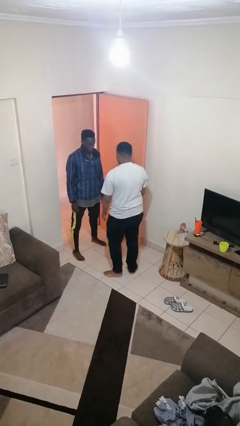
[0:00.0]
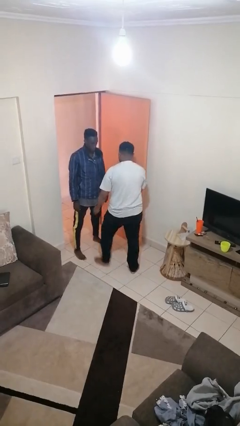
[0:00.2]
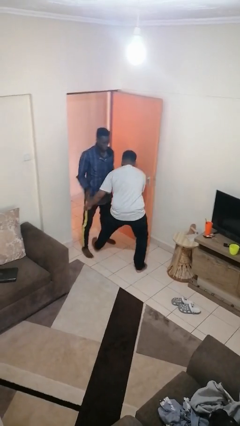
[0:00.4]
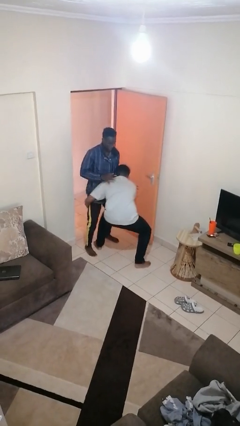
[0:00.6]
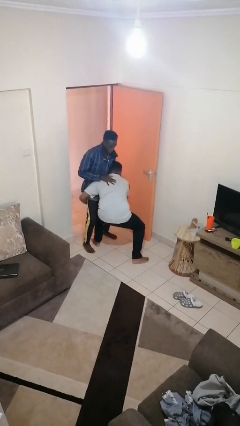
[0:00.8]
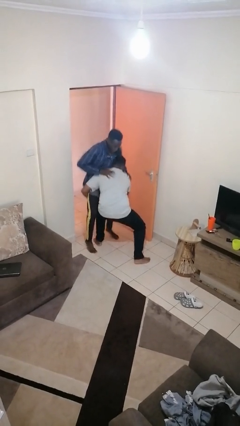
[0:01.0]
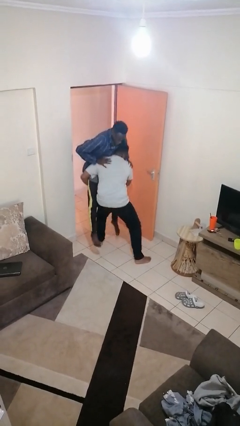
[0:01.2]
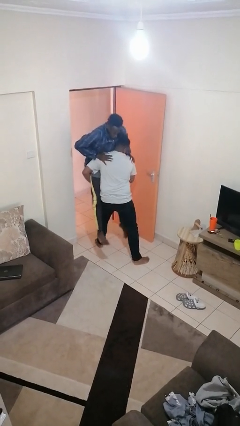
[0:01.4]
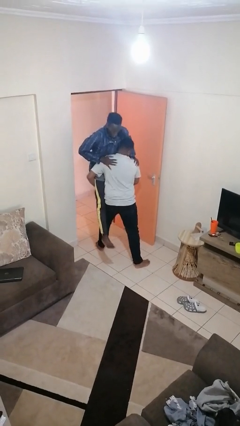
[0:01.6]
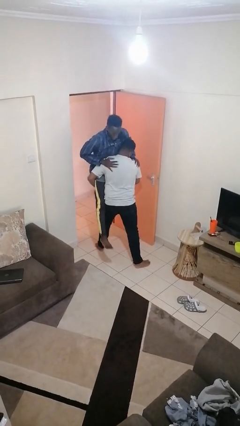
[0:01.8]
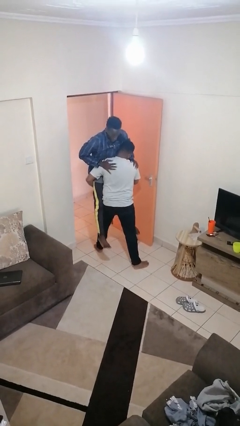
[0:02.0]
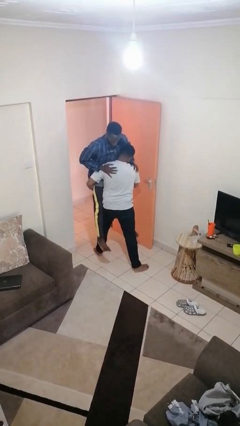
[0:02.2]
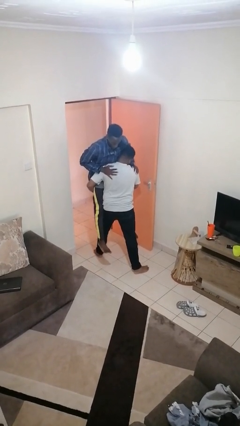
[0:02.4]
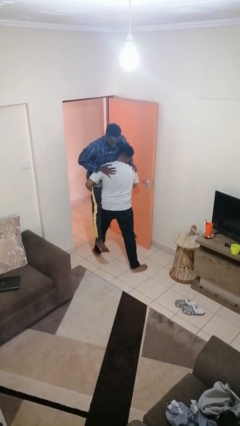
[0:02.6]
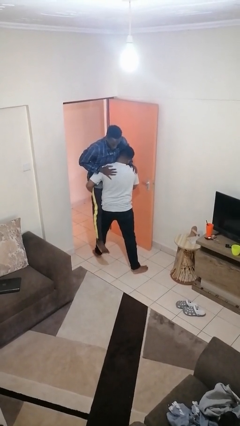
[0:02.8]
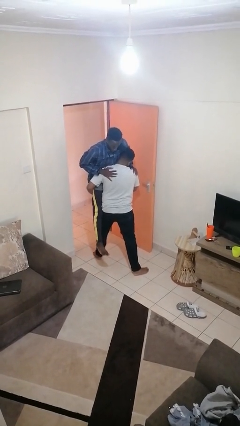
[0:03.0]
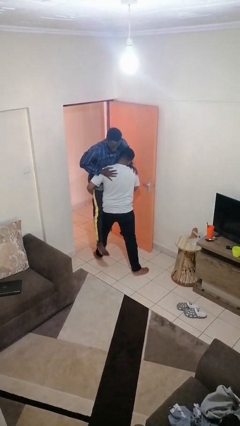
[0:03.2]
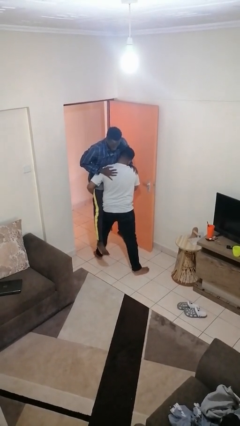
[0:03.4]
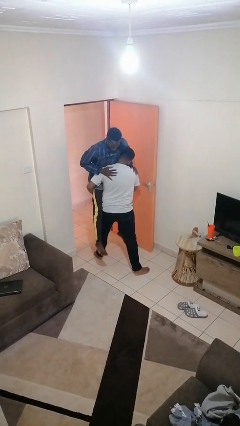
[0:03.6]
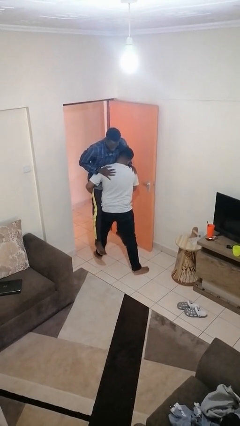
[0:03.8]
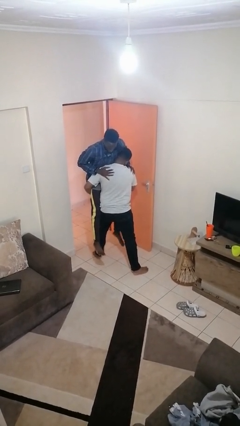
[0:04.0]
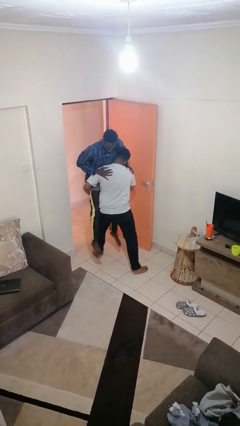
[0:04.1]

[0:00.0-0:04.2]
person picks up person

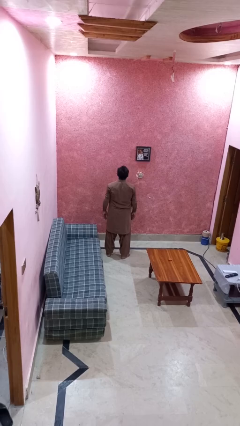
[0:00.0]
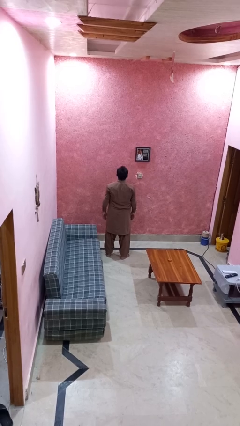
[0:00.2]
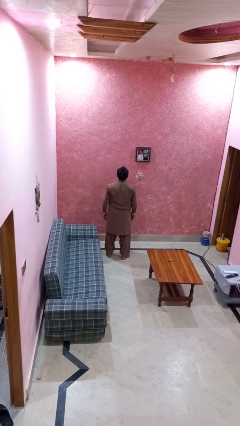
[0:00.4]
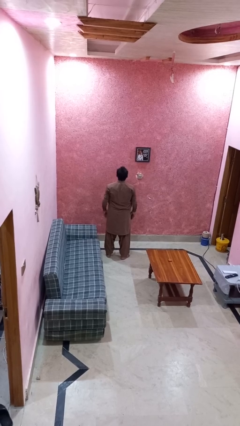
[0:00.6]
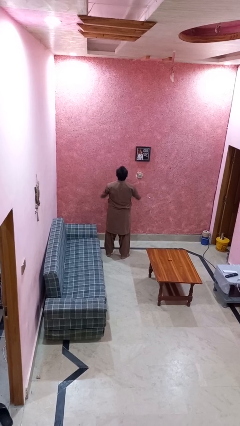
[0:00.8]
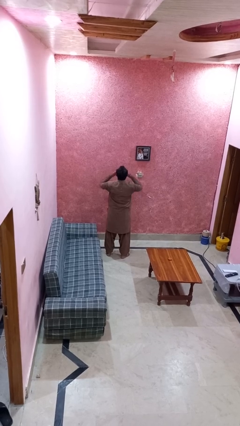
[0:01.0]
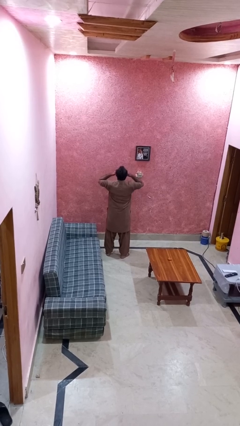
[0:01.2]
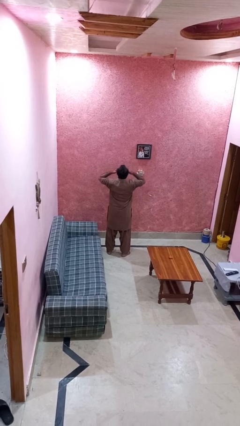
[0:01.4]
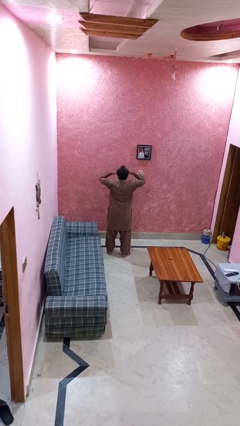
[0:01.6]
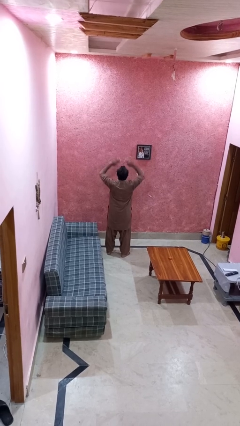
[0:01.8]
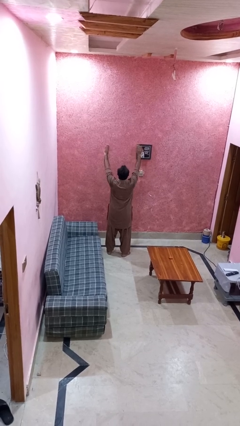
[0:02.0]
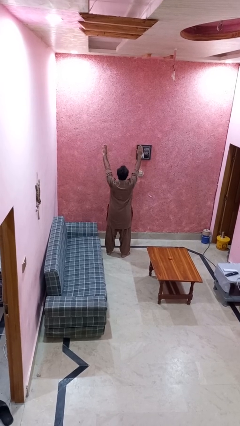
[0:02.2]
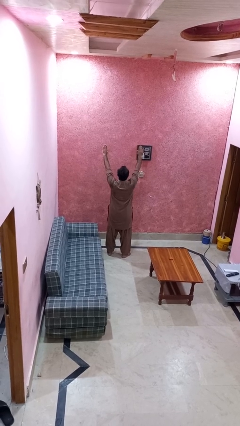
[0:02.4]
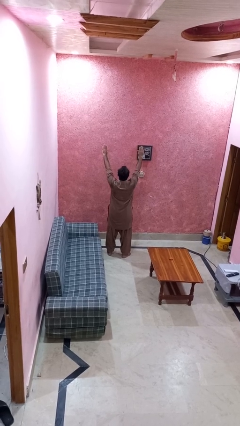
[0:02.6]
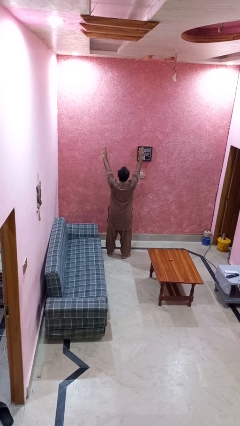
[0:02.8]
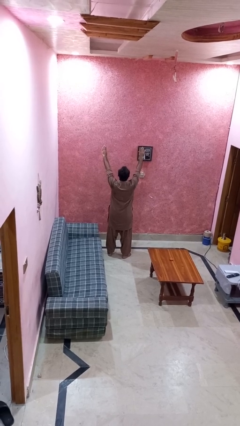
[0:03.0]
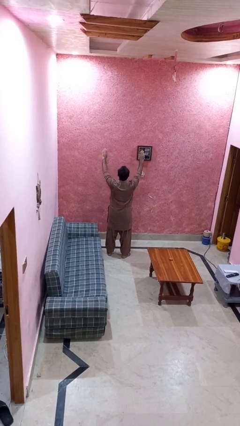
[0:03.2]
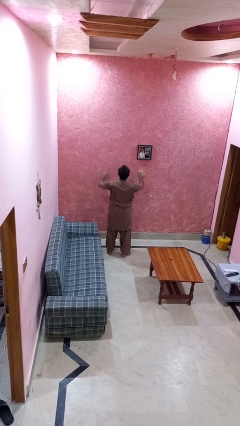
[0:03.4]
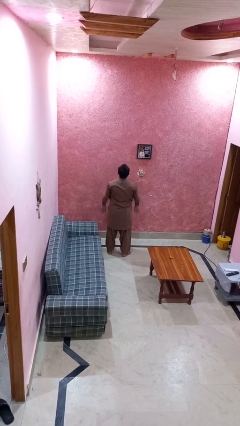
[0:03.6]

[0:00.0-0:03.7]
person gestures blow kiss

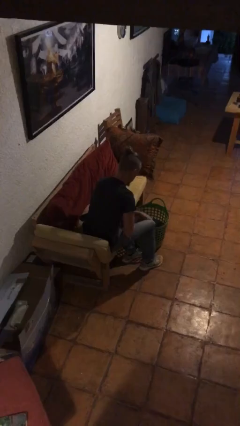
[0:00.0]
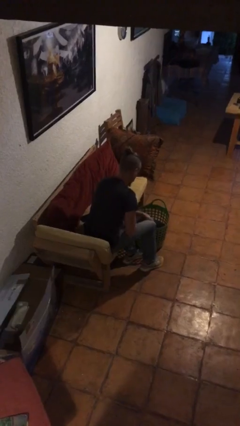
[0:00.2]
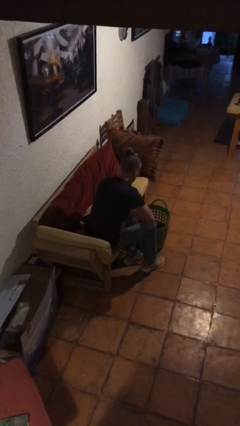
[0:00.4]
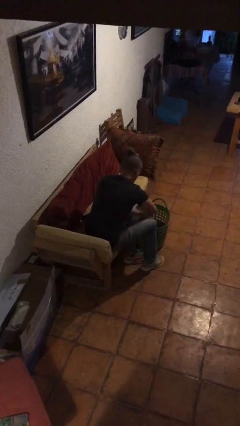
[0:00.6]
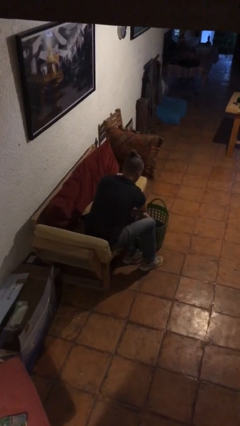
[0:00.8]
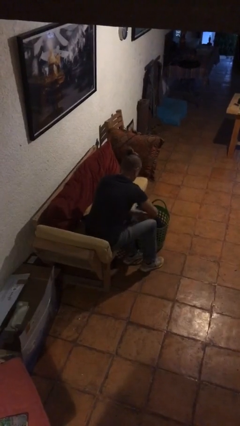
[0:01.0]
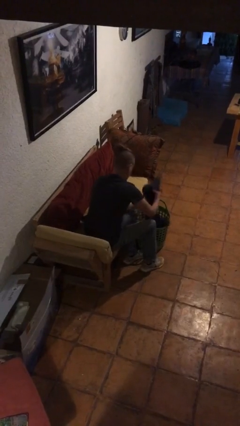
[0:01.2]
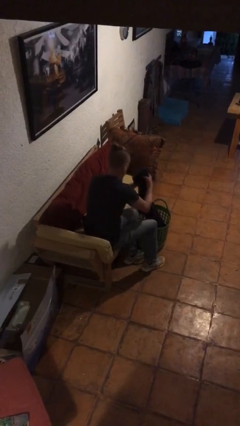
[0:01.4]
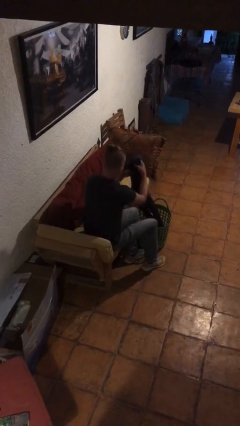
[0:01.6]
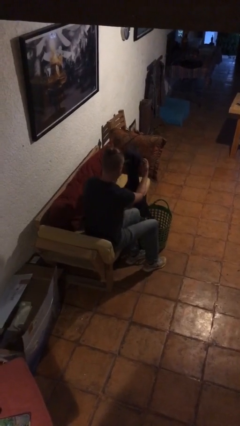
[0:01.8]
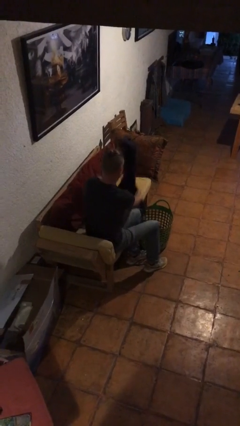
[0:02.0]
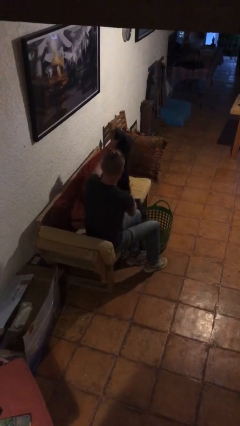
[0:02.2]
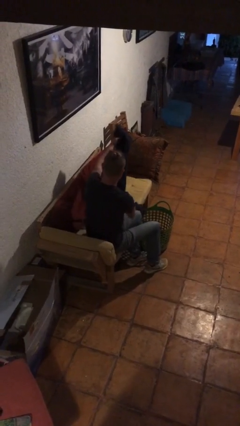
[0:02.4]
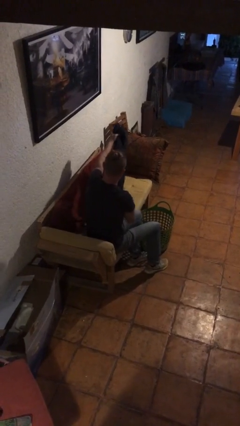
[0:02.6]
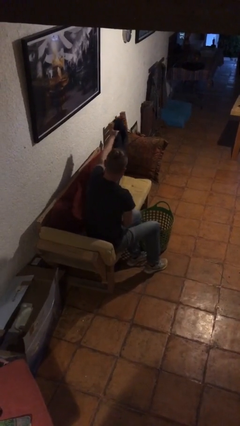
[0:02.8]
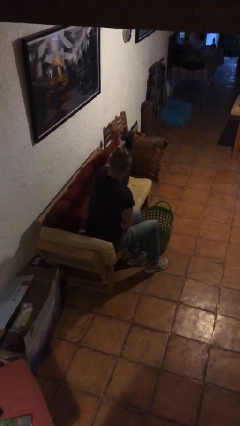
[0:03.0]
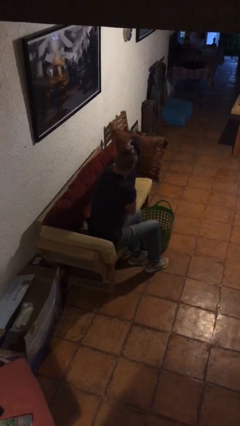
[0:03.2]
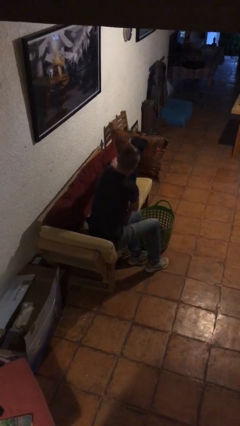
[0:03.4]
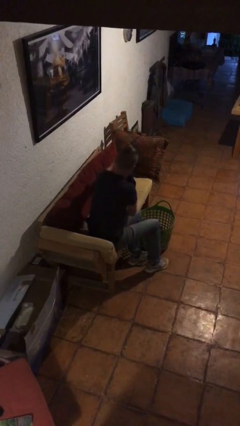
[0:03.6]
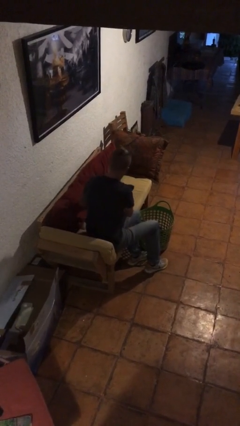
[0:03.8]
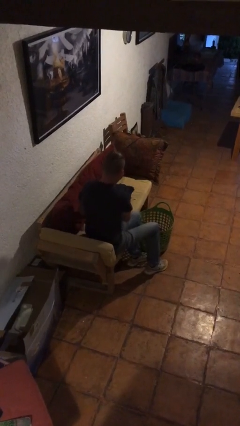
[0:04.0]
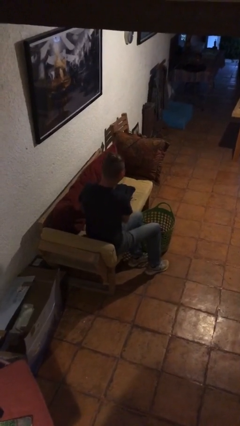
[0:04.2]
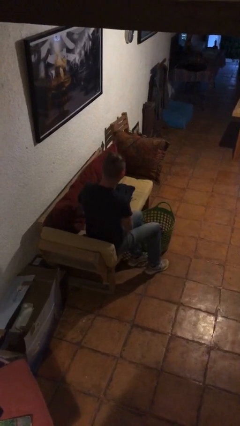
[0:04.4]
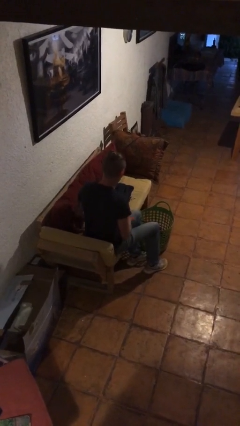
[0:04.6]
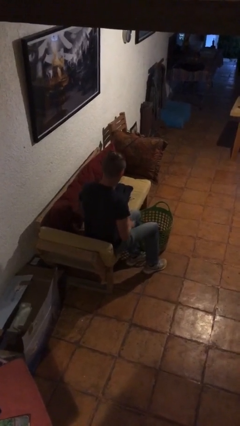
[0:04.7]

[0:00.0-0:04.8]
person folds pants

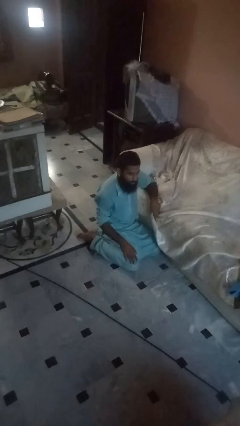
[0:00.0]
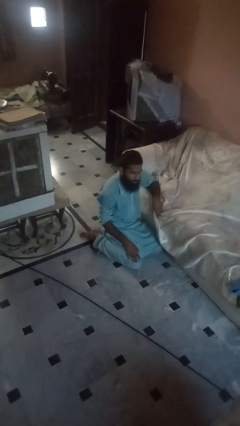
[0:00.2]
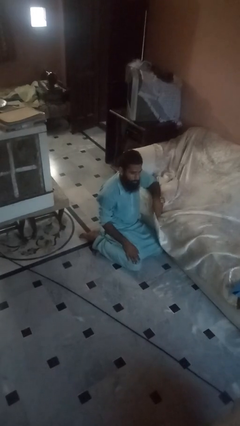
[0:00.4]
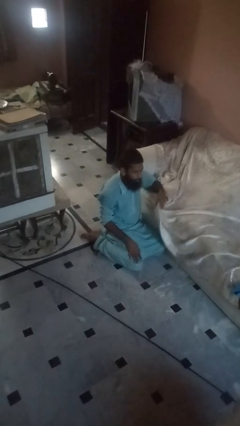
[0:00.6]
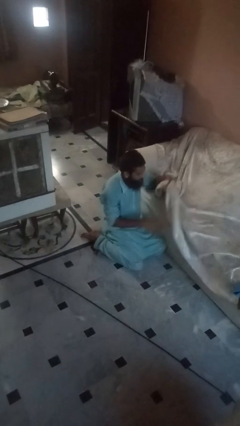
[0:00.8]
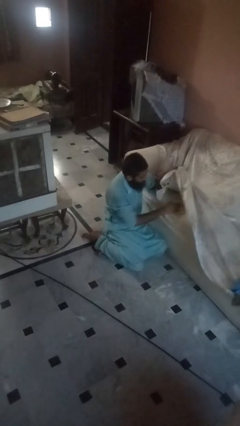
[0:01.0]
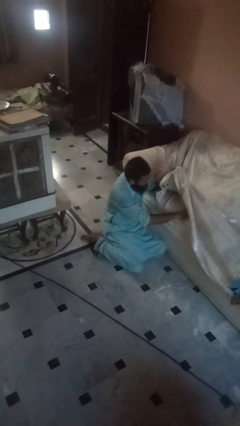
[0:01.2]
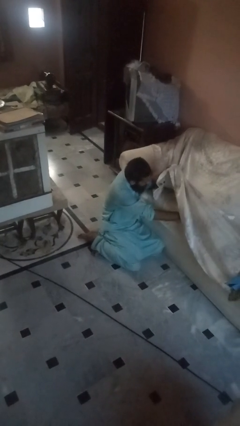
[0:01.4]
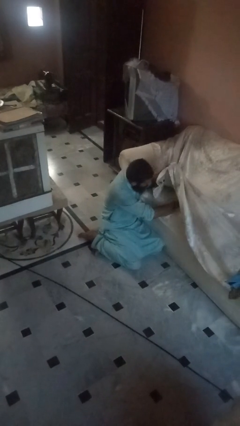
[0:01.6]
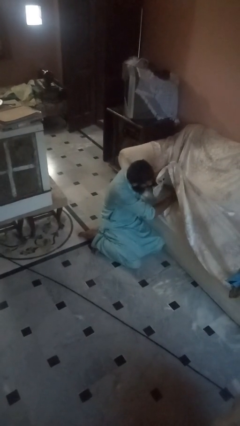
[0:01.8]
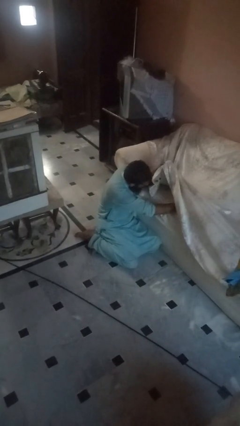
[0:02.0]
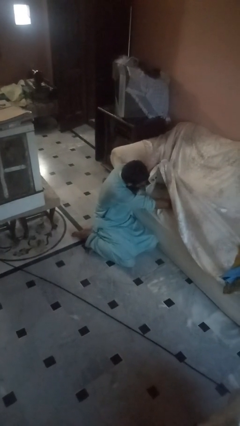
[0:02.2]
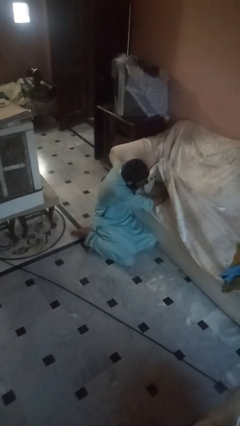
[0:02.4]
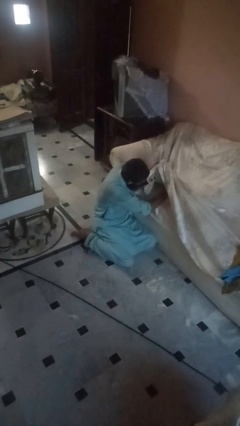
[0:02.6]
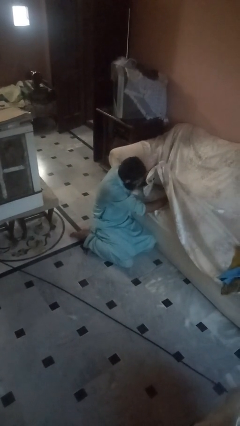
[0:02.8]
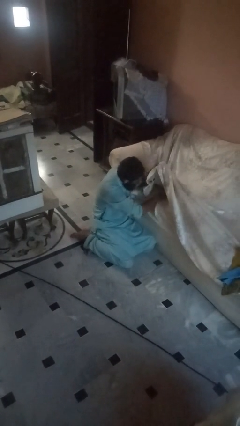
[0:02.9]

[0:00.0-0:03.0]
person searches under couch

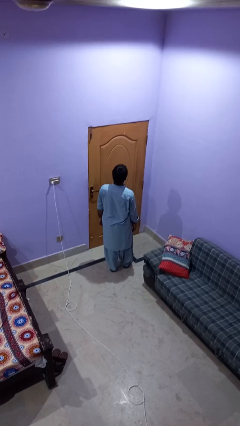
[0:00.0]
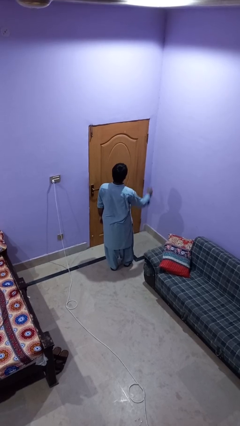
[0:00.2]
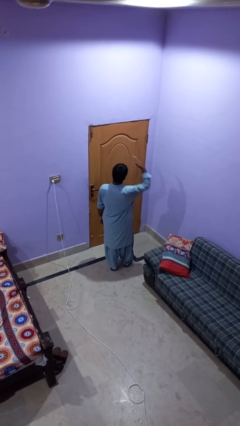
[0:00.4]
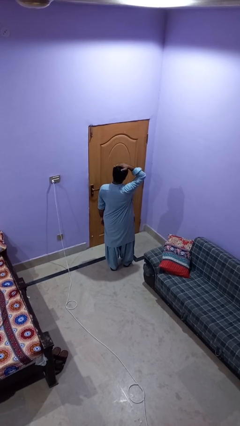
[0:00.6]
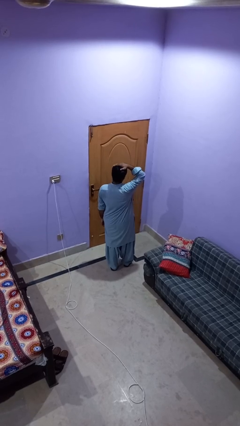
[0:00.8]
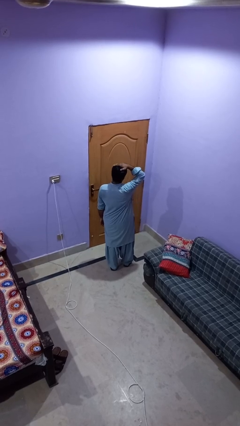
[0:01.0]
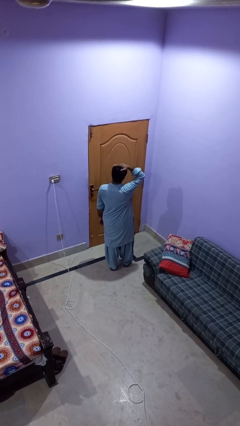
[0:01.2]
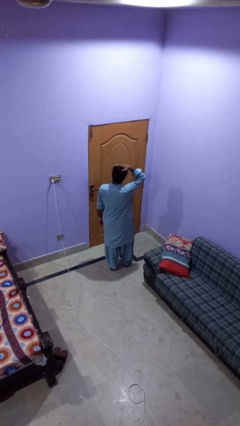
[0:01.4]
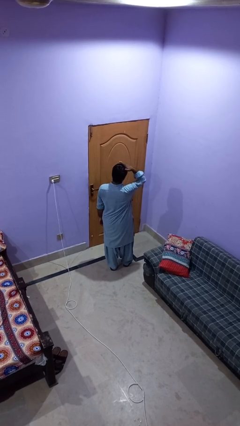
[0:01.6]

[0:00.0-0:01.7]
person pats head

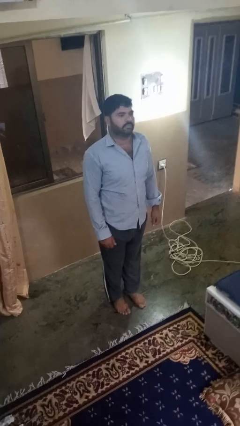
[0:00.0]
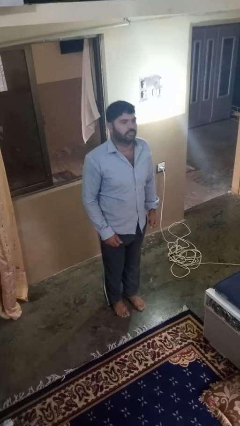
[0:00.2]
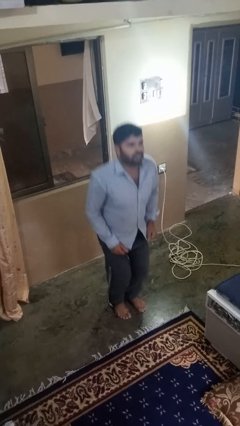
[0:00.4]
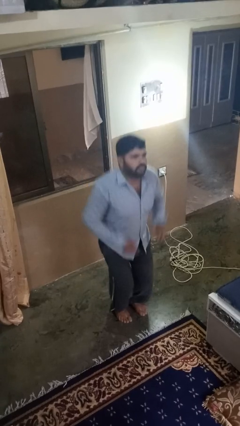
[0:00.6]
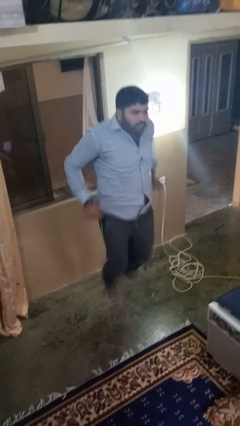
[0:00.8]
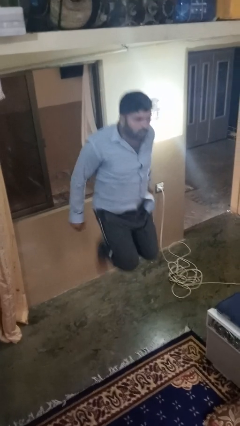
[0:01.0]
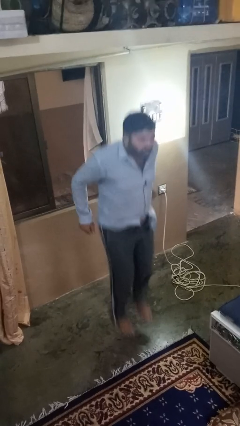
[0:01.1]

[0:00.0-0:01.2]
person jumps
